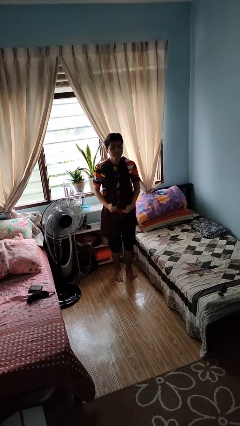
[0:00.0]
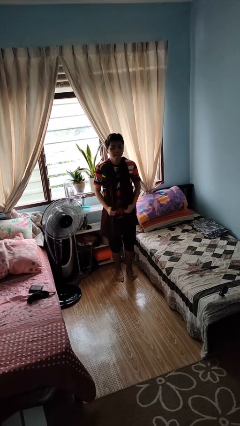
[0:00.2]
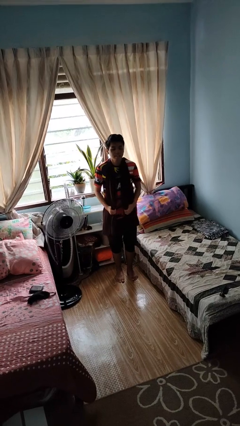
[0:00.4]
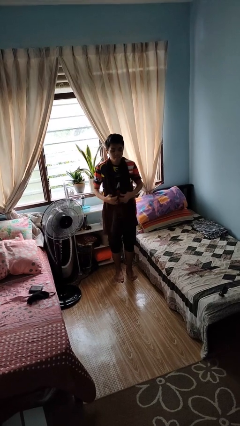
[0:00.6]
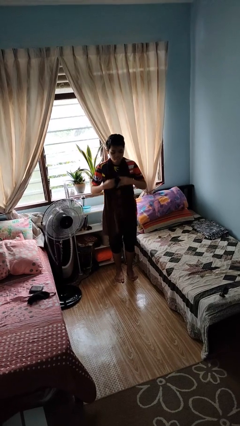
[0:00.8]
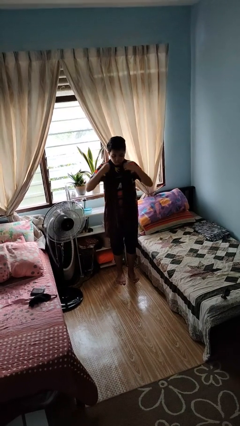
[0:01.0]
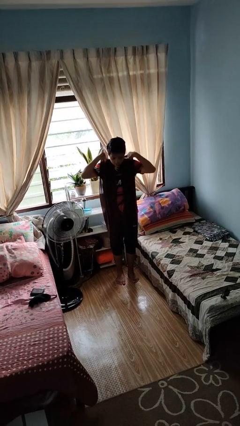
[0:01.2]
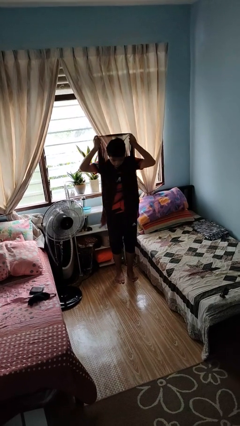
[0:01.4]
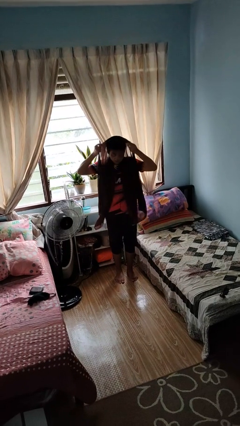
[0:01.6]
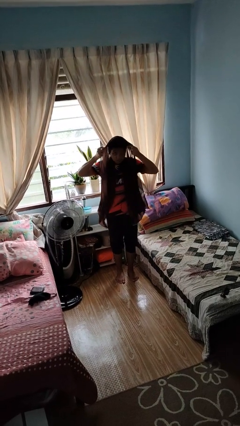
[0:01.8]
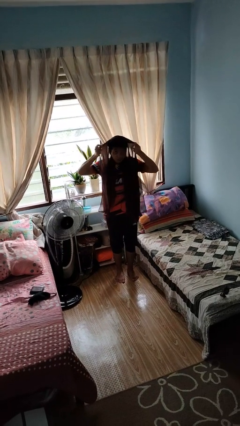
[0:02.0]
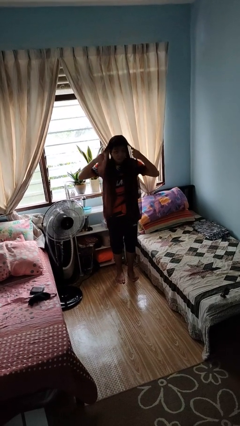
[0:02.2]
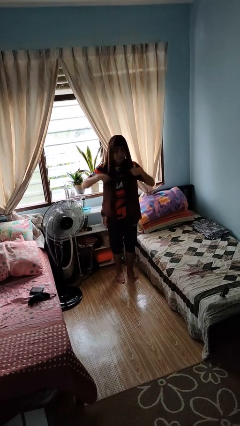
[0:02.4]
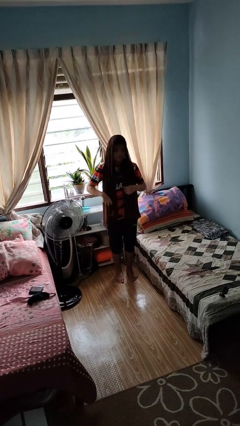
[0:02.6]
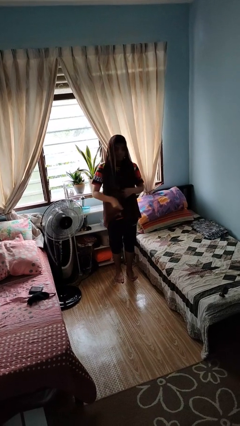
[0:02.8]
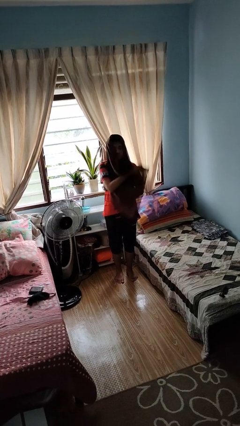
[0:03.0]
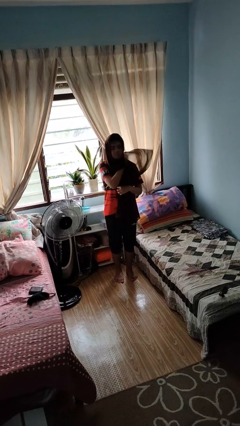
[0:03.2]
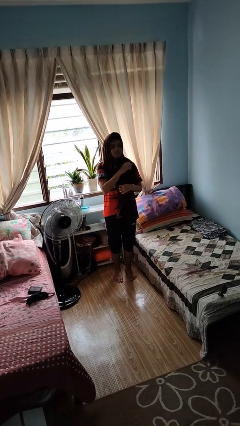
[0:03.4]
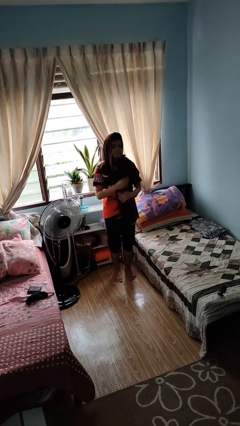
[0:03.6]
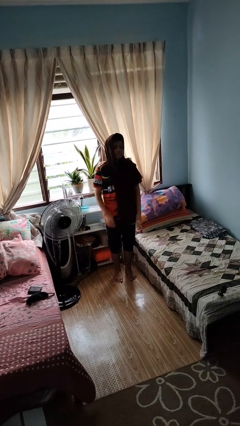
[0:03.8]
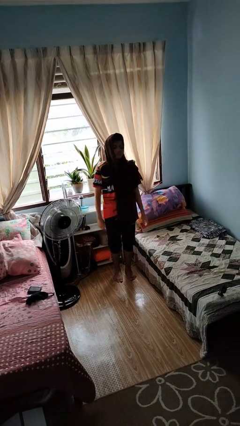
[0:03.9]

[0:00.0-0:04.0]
person puts on scarf

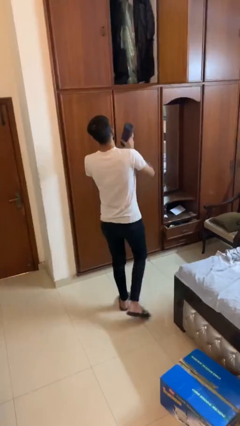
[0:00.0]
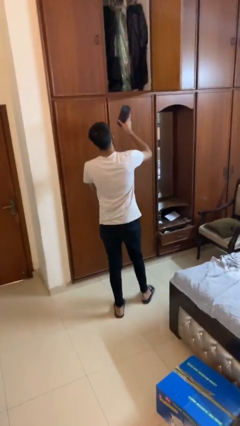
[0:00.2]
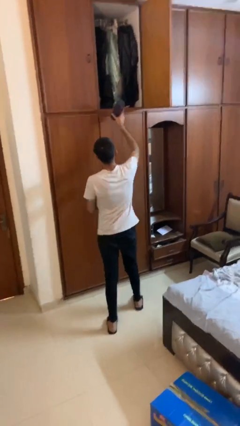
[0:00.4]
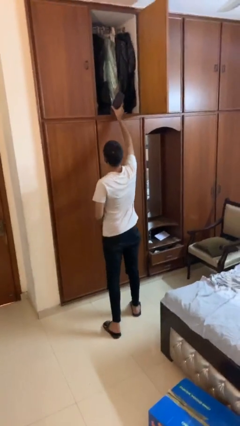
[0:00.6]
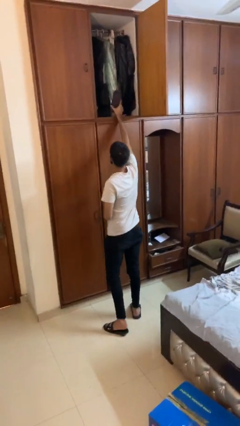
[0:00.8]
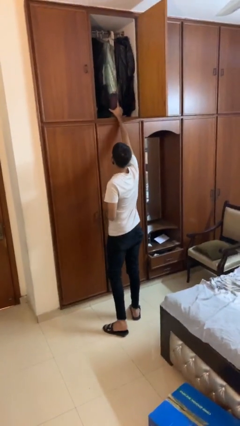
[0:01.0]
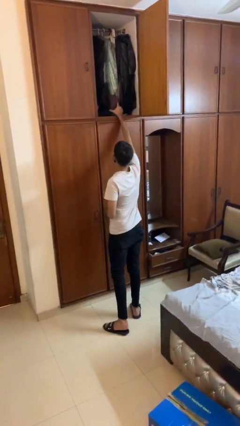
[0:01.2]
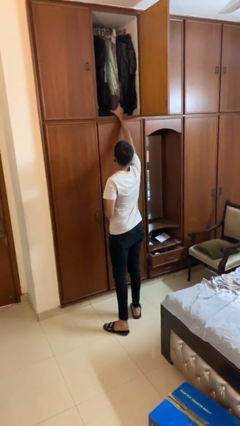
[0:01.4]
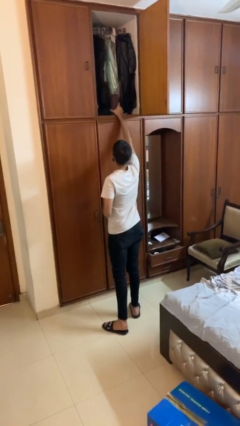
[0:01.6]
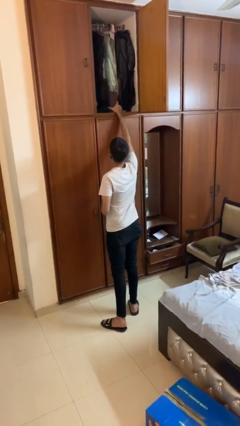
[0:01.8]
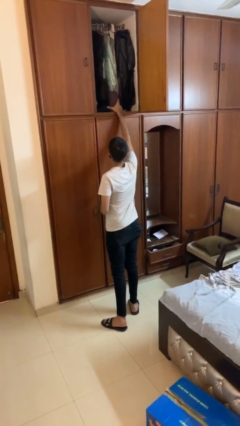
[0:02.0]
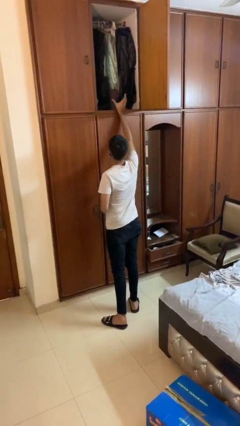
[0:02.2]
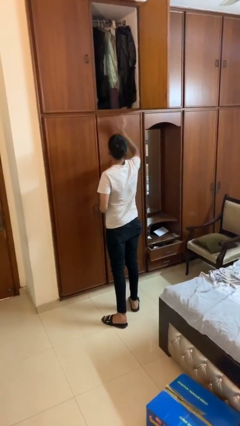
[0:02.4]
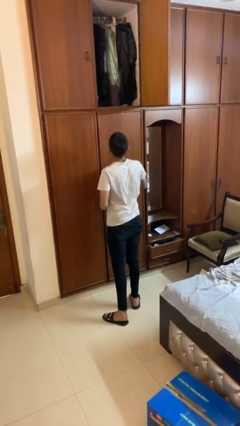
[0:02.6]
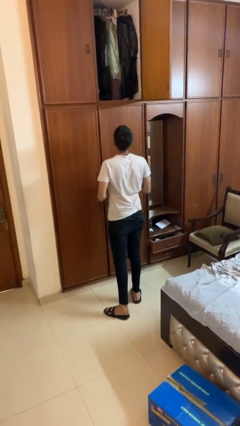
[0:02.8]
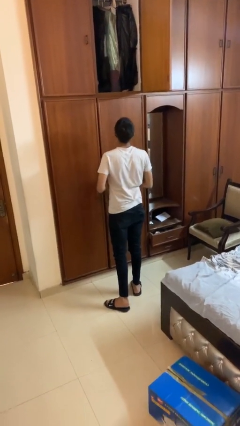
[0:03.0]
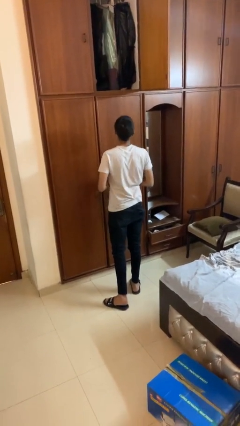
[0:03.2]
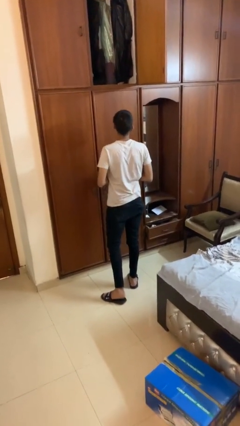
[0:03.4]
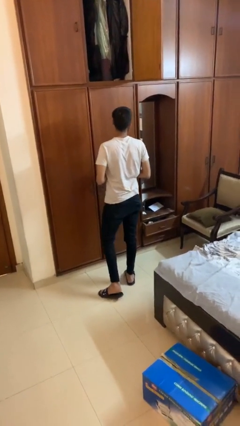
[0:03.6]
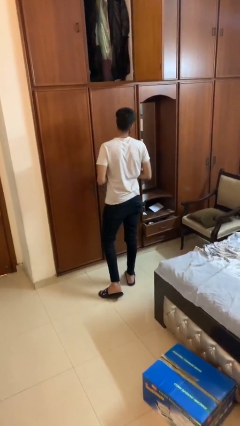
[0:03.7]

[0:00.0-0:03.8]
person puts down object on shelf

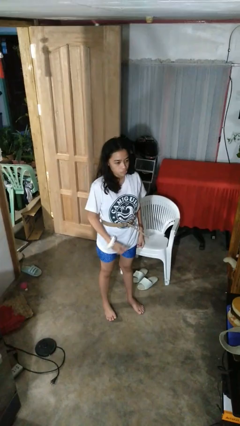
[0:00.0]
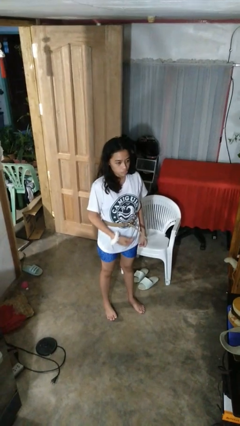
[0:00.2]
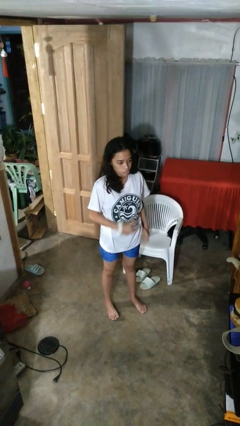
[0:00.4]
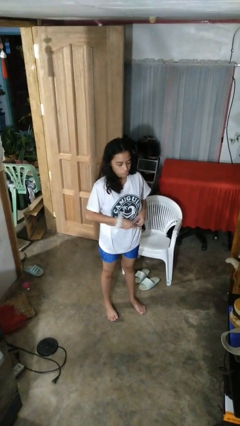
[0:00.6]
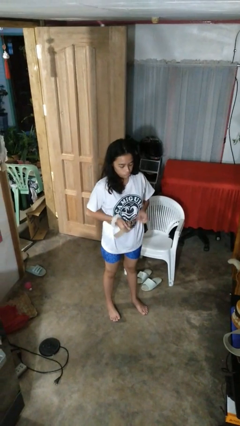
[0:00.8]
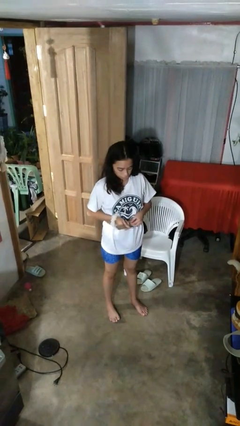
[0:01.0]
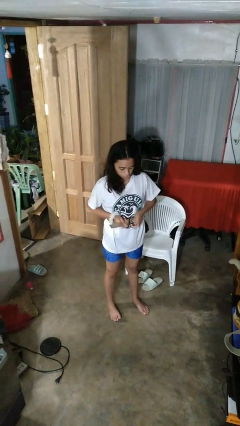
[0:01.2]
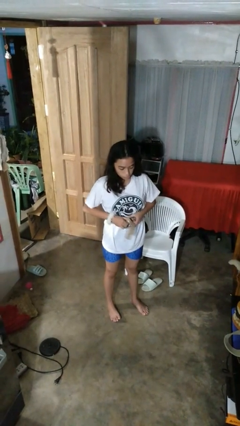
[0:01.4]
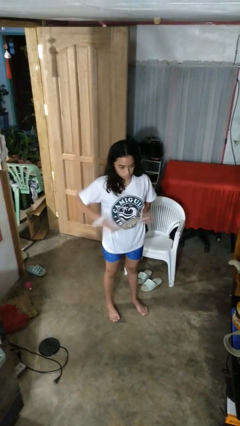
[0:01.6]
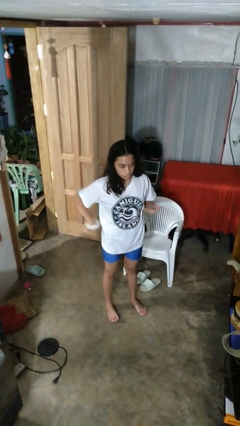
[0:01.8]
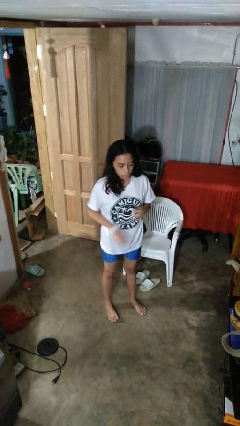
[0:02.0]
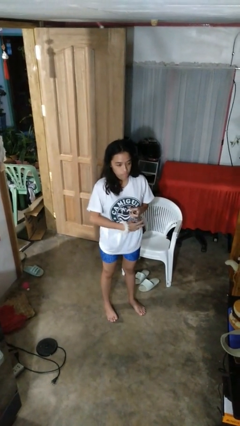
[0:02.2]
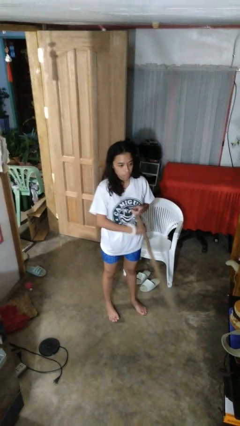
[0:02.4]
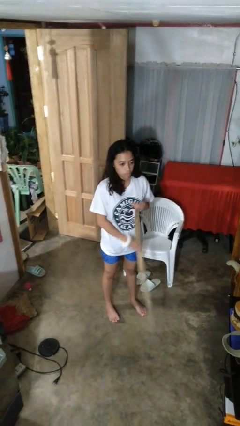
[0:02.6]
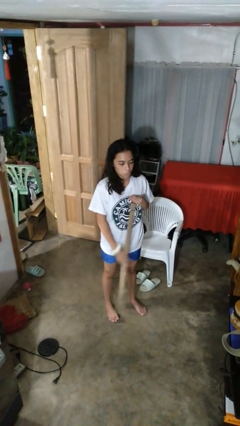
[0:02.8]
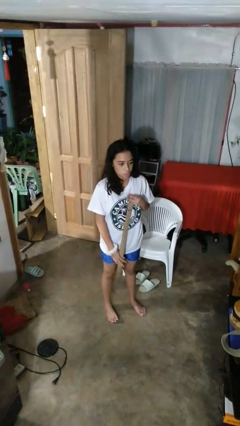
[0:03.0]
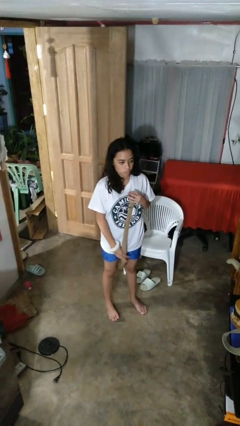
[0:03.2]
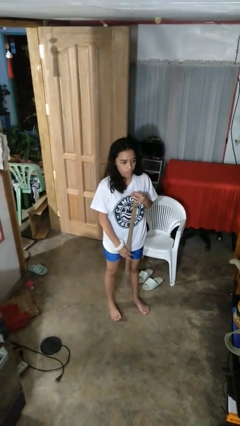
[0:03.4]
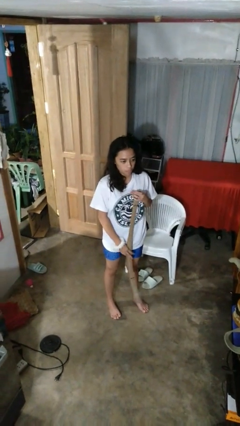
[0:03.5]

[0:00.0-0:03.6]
person takes off belt

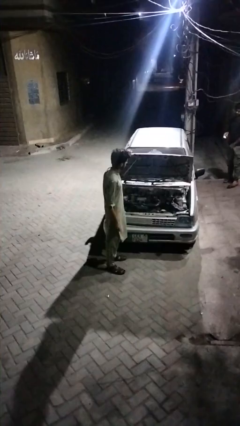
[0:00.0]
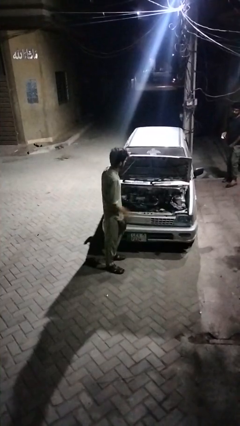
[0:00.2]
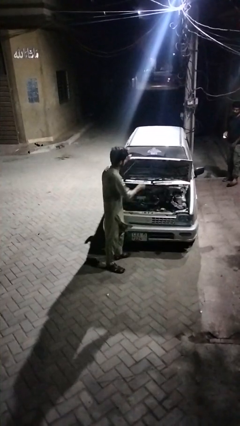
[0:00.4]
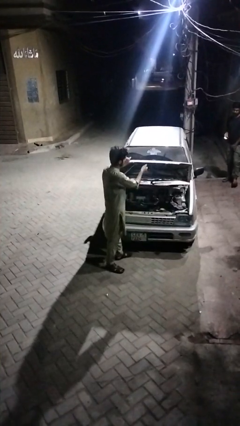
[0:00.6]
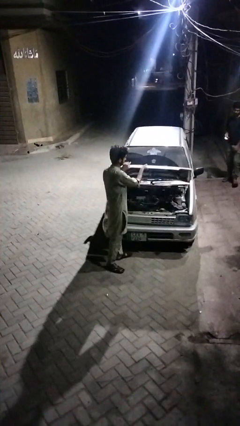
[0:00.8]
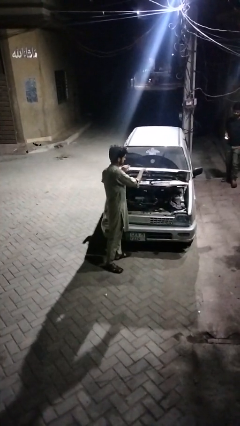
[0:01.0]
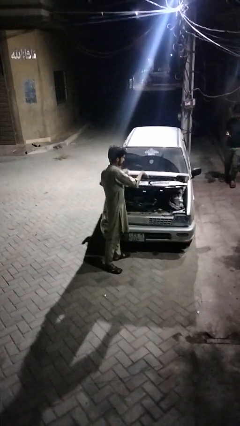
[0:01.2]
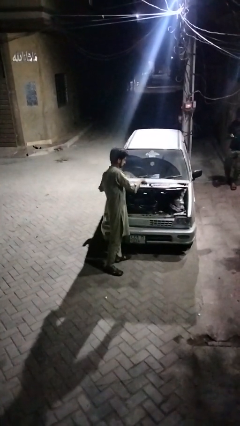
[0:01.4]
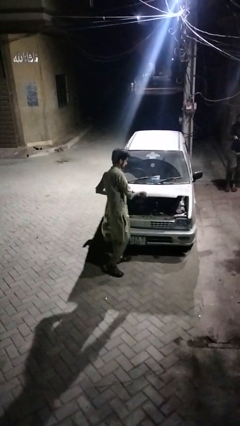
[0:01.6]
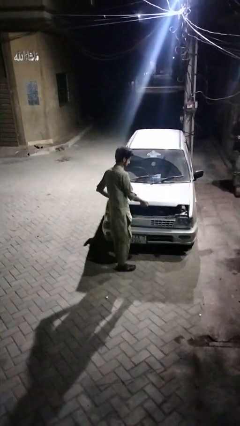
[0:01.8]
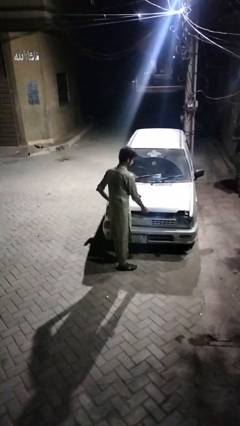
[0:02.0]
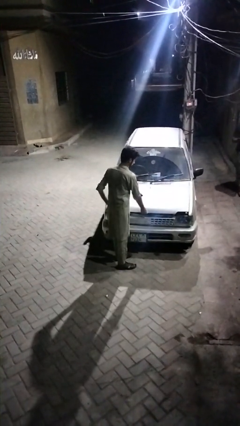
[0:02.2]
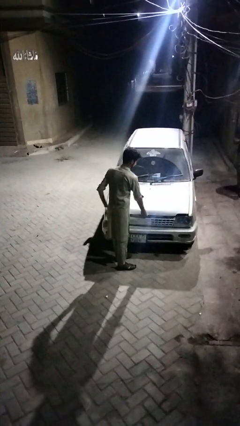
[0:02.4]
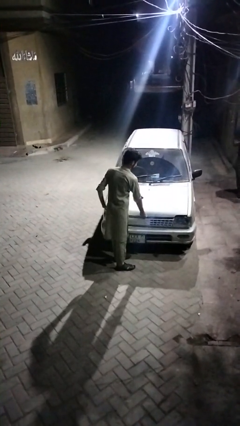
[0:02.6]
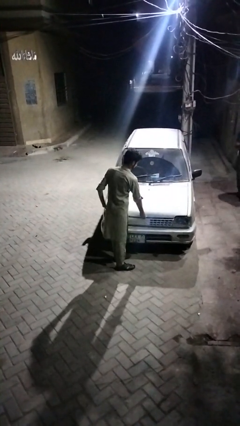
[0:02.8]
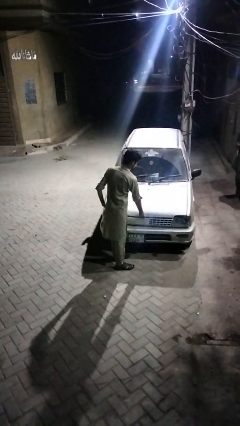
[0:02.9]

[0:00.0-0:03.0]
person closes car hood

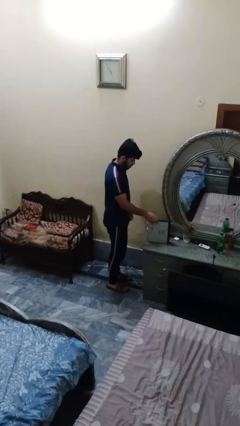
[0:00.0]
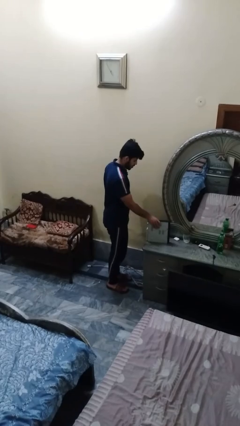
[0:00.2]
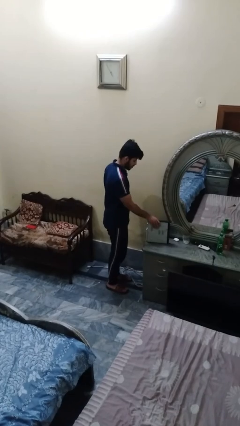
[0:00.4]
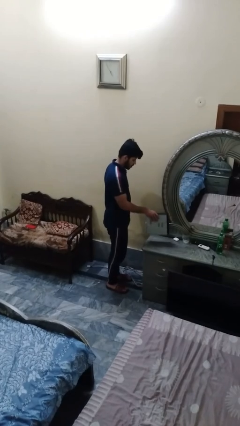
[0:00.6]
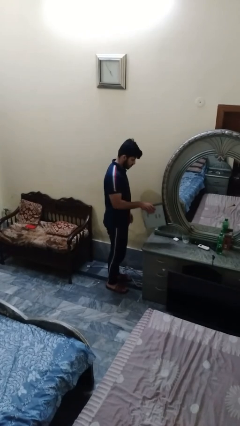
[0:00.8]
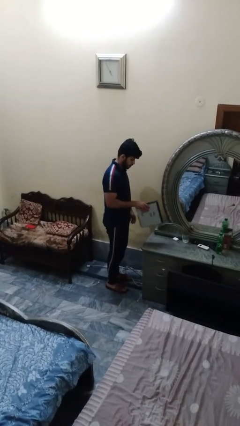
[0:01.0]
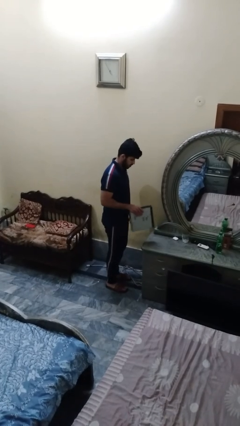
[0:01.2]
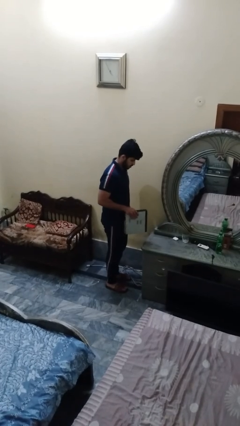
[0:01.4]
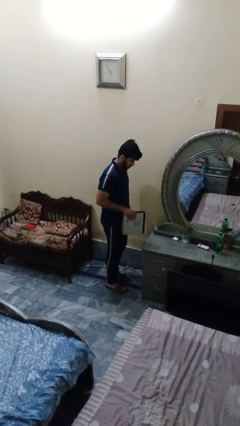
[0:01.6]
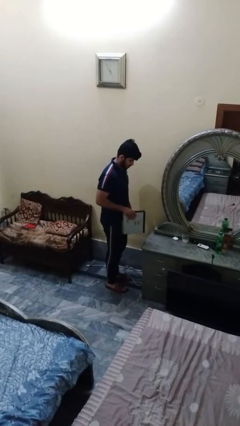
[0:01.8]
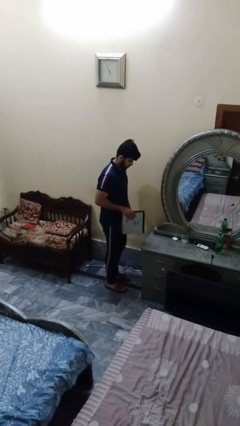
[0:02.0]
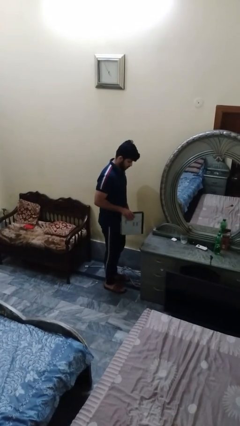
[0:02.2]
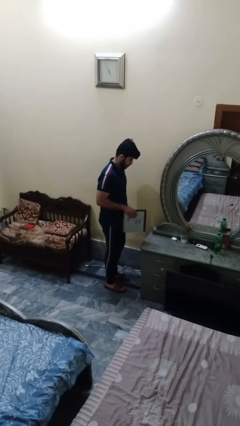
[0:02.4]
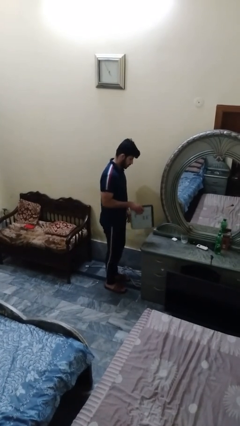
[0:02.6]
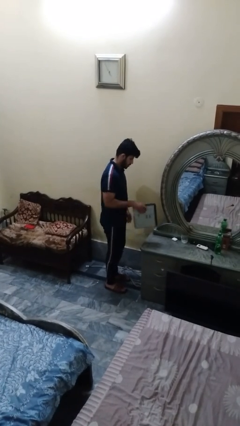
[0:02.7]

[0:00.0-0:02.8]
person picks up object from countertop

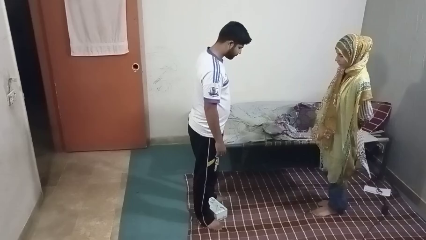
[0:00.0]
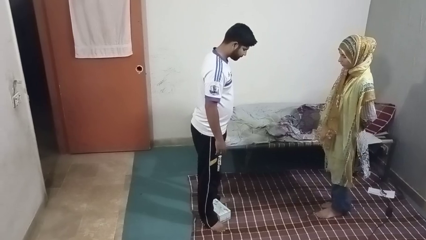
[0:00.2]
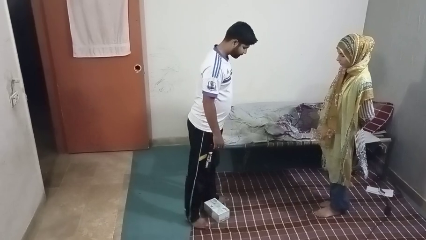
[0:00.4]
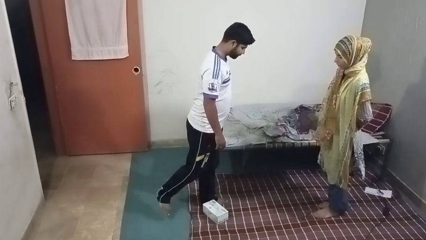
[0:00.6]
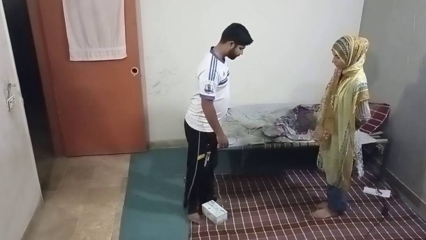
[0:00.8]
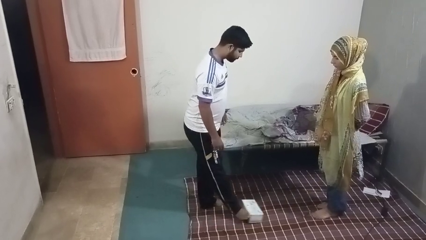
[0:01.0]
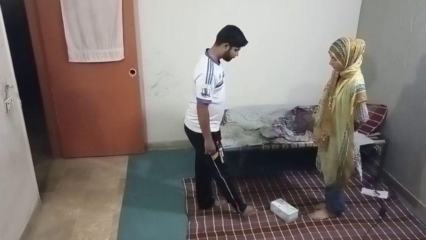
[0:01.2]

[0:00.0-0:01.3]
person kicks object to person
